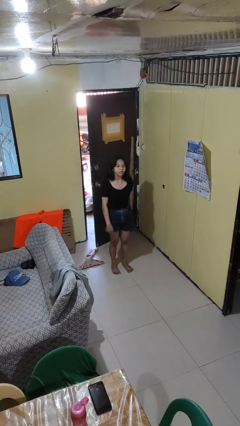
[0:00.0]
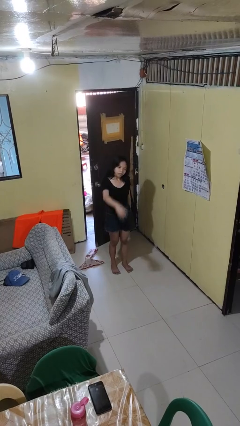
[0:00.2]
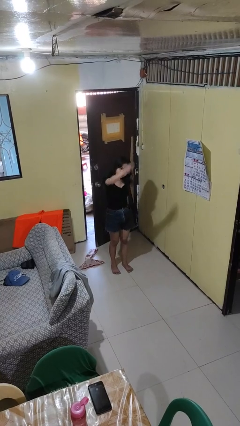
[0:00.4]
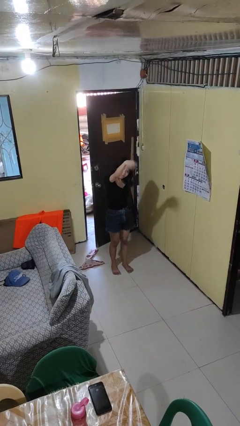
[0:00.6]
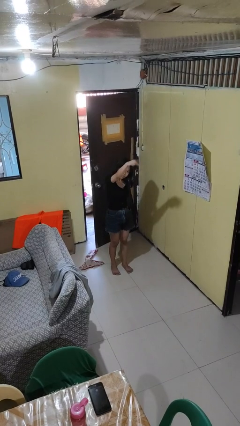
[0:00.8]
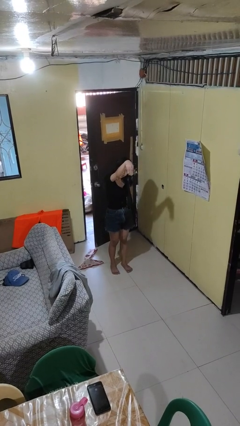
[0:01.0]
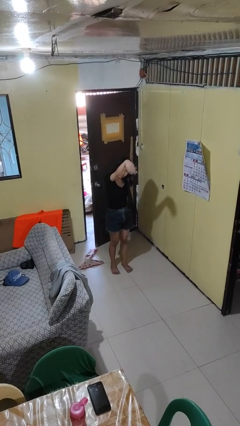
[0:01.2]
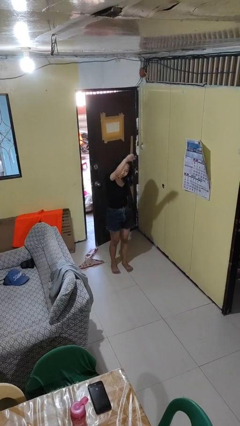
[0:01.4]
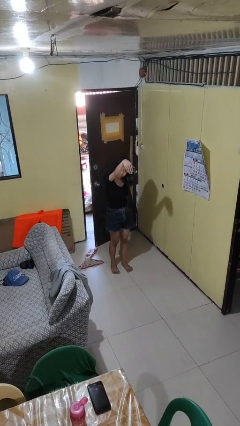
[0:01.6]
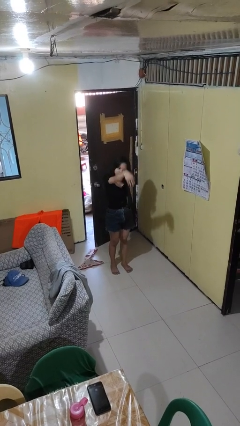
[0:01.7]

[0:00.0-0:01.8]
person gestures come here

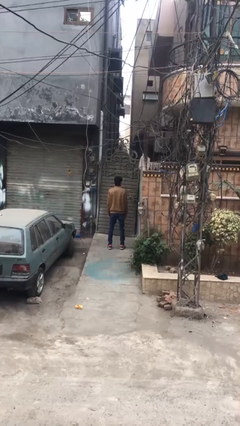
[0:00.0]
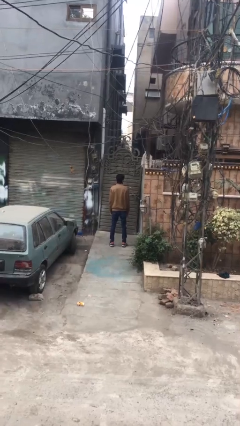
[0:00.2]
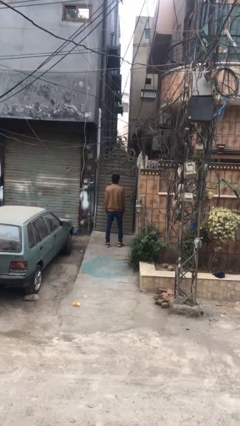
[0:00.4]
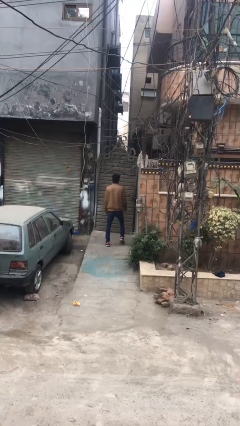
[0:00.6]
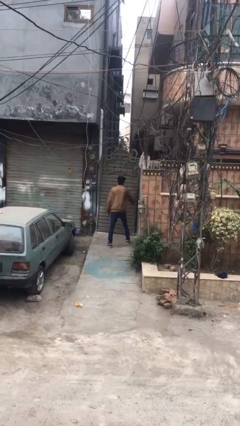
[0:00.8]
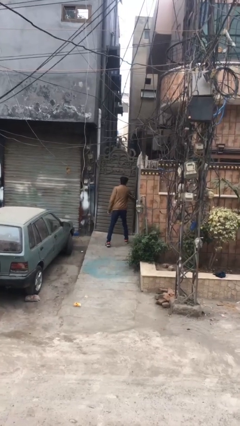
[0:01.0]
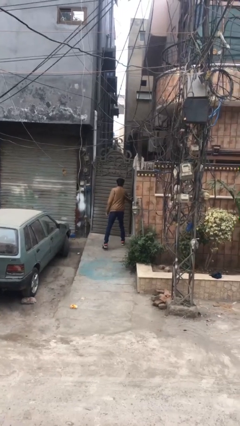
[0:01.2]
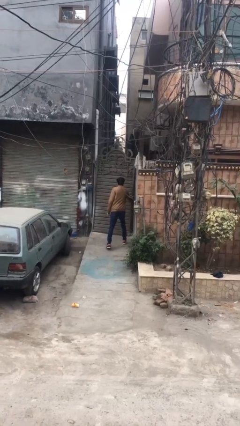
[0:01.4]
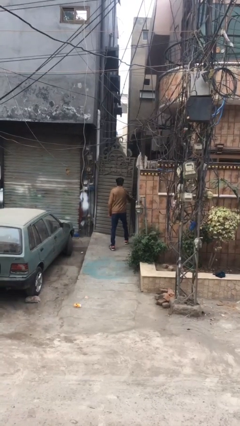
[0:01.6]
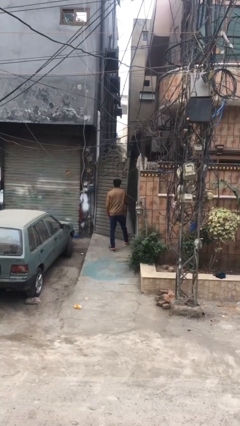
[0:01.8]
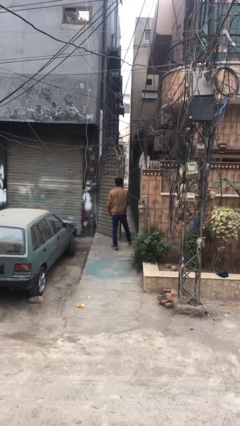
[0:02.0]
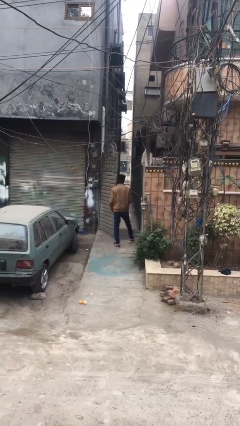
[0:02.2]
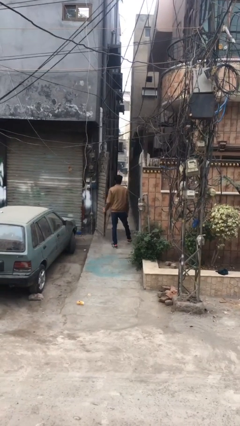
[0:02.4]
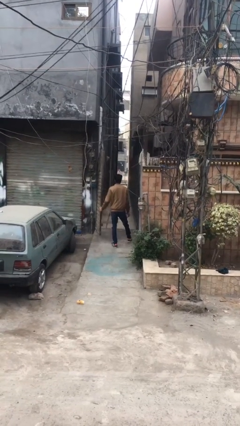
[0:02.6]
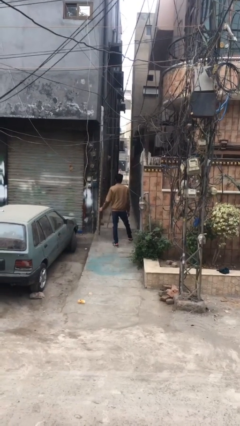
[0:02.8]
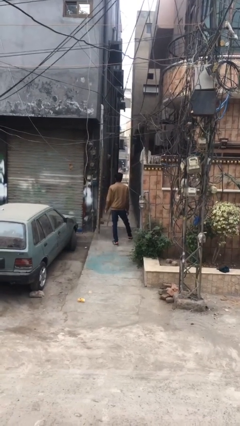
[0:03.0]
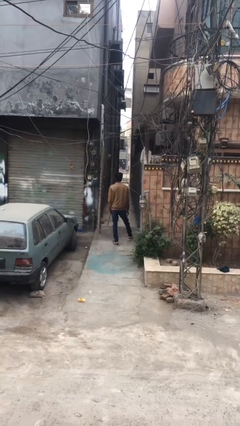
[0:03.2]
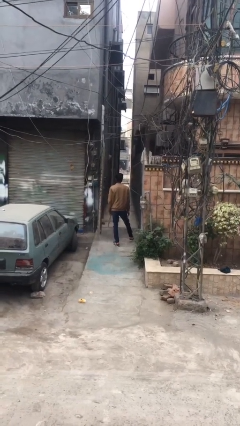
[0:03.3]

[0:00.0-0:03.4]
person opens facility door

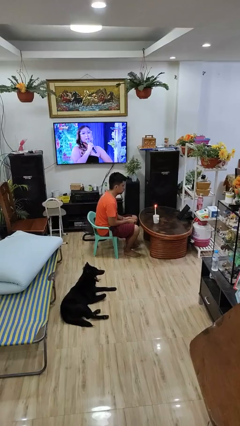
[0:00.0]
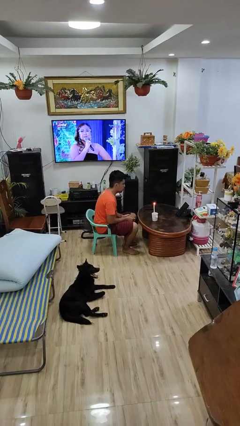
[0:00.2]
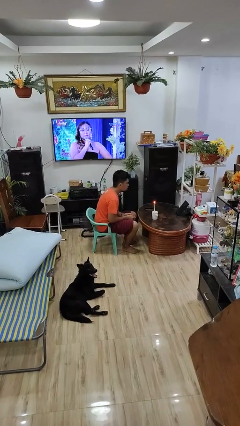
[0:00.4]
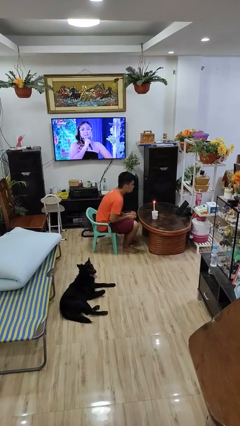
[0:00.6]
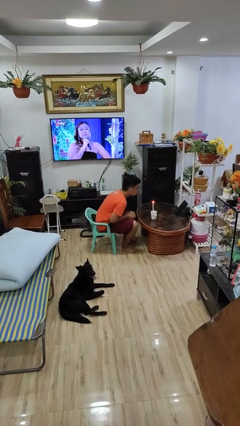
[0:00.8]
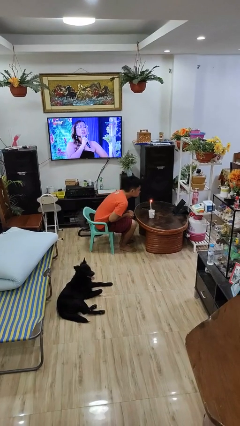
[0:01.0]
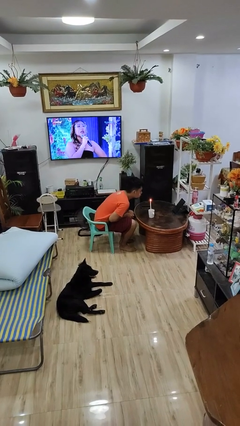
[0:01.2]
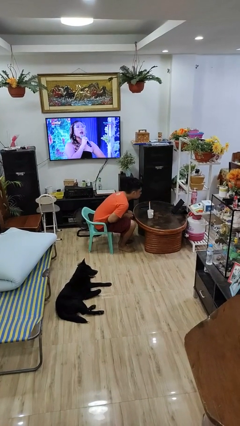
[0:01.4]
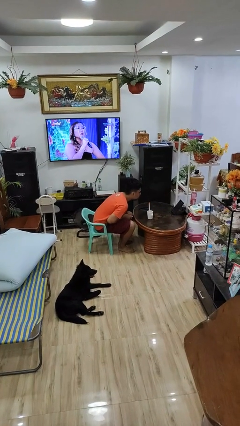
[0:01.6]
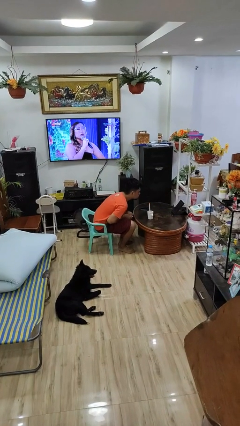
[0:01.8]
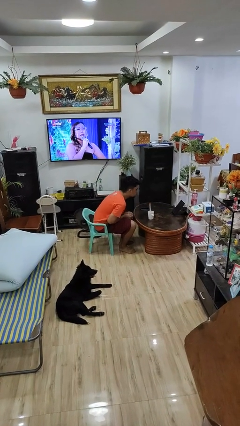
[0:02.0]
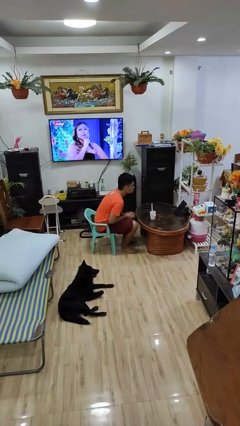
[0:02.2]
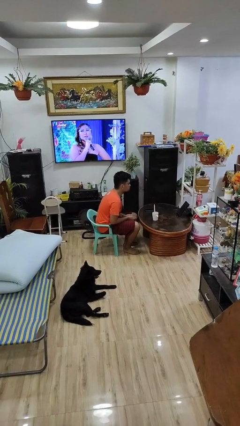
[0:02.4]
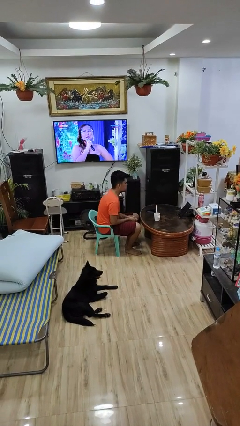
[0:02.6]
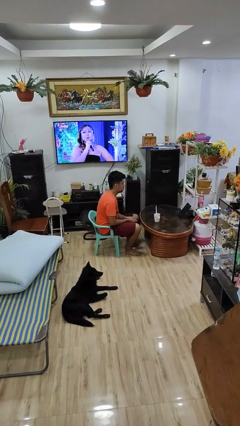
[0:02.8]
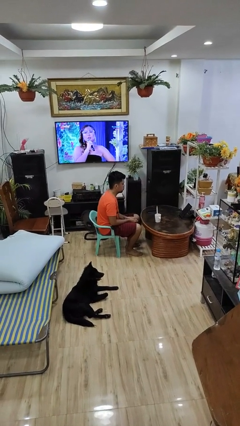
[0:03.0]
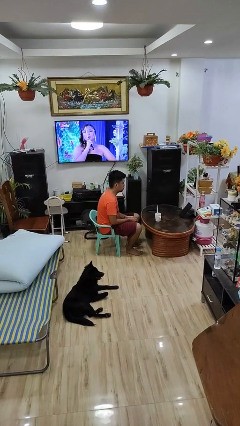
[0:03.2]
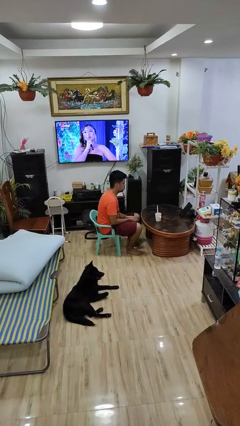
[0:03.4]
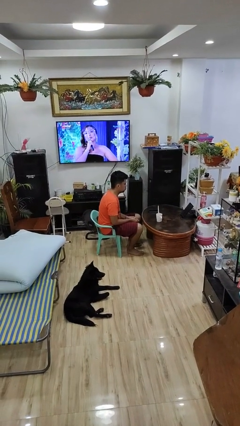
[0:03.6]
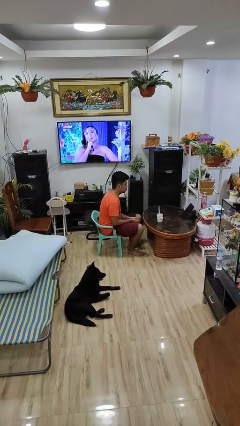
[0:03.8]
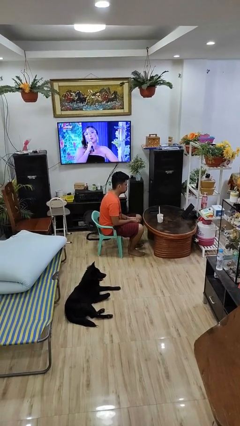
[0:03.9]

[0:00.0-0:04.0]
person extinguishes candle

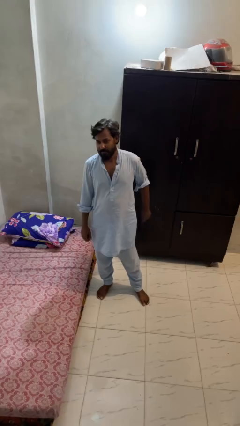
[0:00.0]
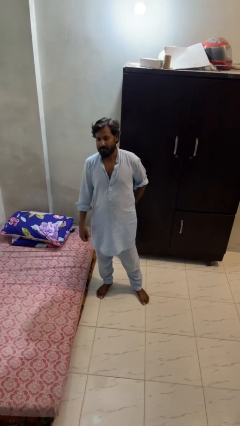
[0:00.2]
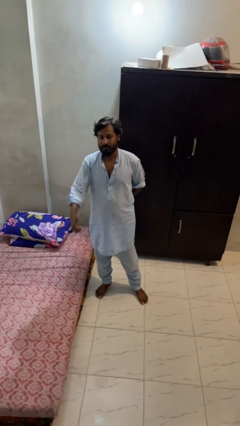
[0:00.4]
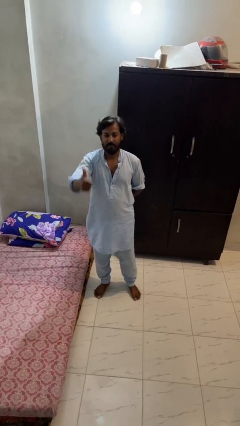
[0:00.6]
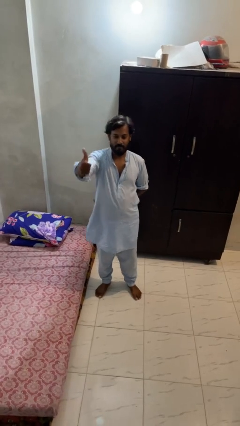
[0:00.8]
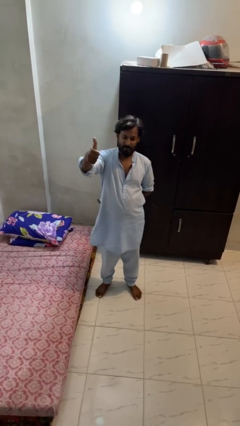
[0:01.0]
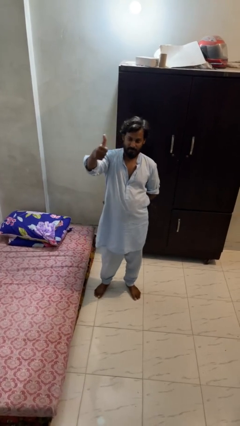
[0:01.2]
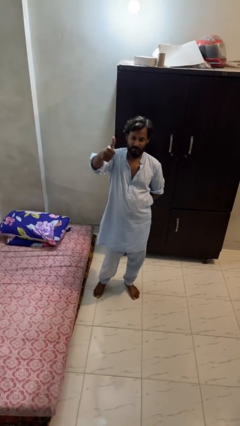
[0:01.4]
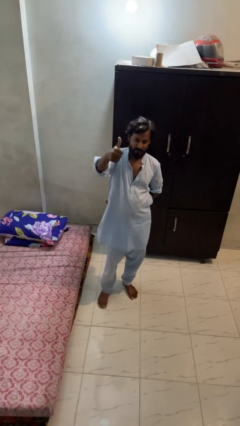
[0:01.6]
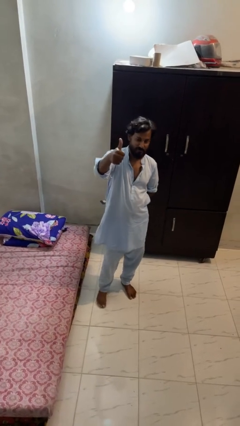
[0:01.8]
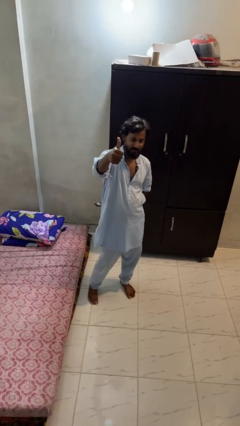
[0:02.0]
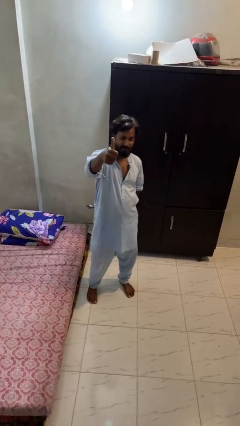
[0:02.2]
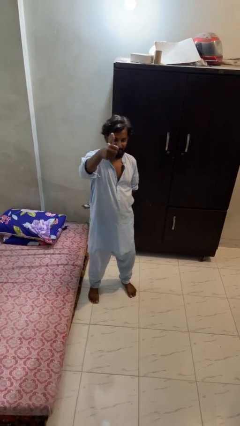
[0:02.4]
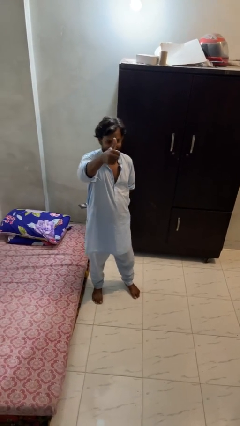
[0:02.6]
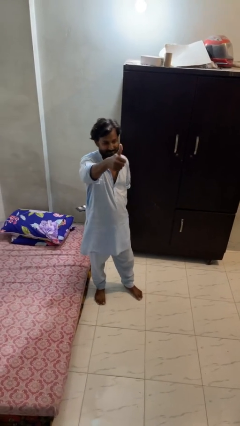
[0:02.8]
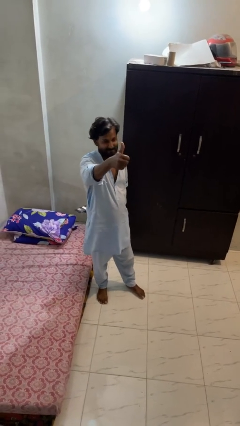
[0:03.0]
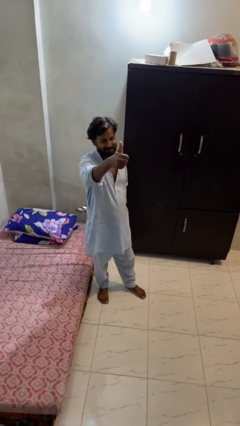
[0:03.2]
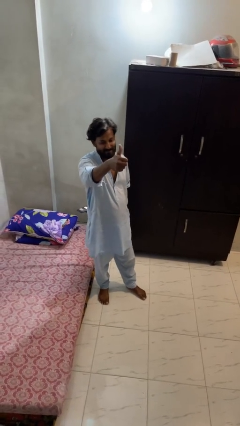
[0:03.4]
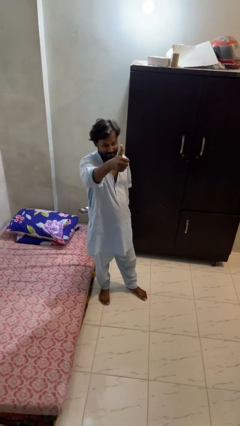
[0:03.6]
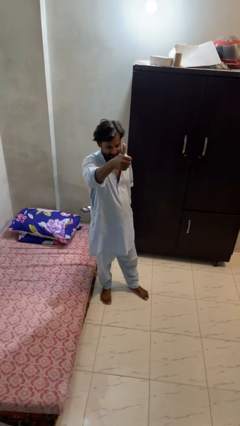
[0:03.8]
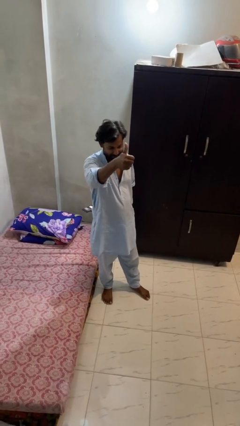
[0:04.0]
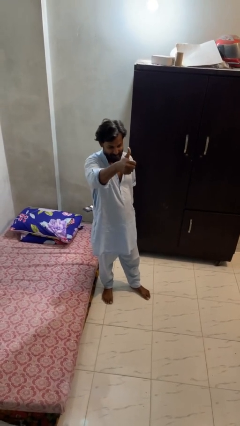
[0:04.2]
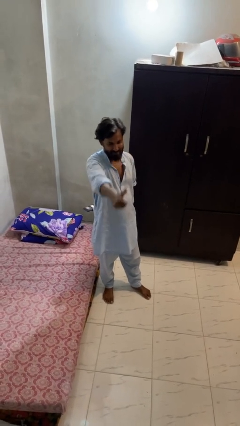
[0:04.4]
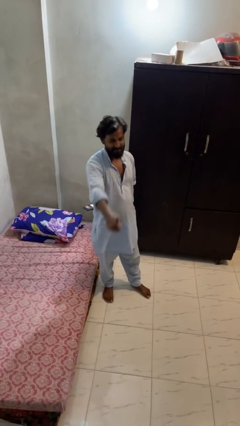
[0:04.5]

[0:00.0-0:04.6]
person gestures thumbs up

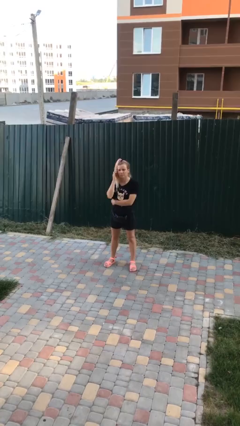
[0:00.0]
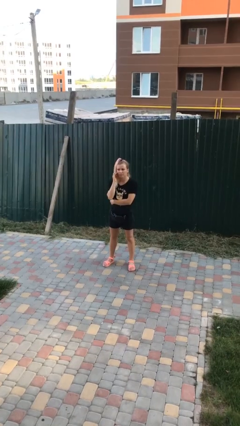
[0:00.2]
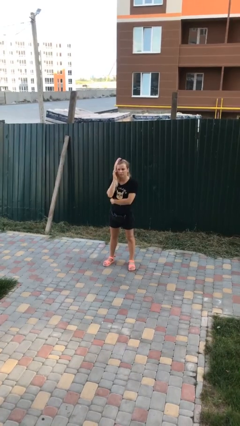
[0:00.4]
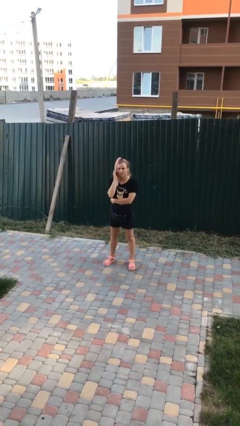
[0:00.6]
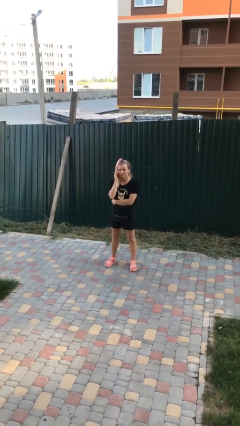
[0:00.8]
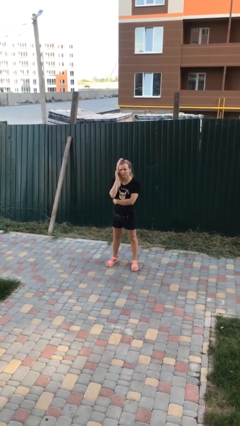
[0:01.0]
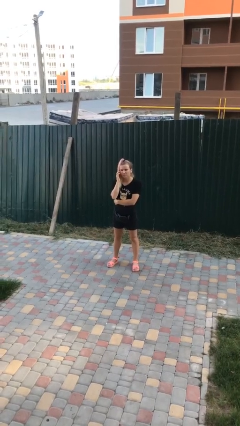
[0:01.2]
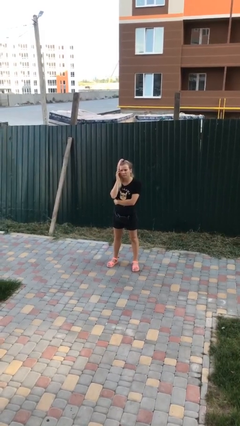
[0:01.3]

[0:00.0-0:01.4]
person scratches face

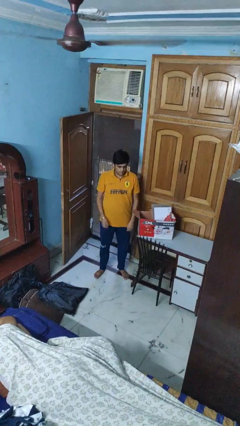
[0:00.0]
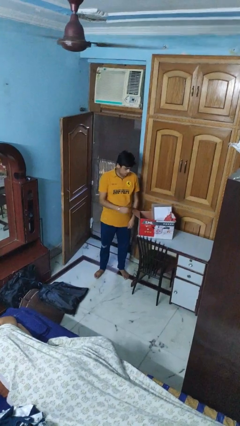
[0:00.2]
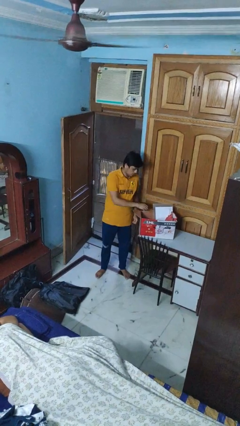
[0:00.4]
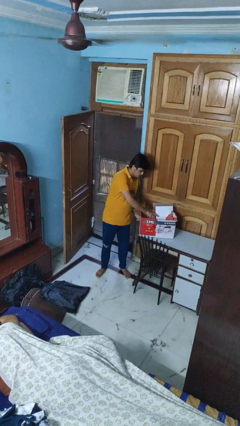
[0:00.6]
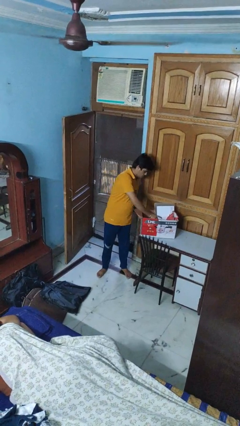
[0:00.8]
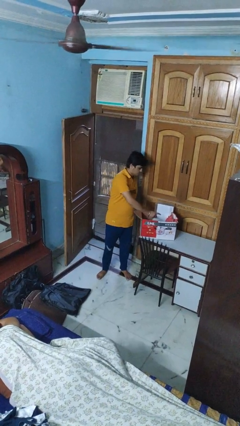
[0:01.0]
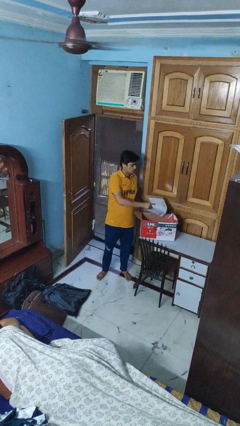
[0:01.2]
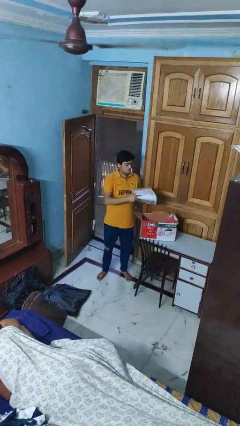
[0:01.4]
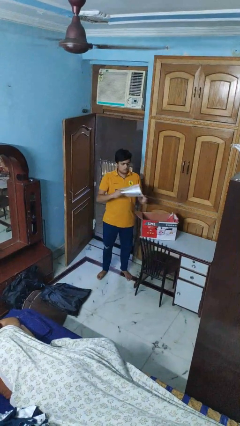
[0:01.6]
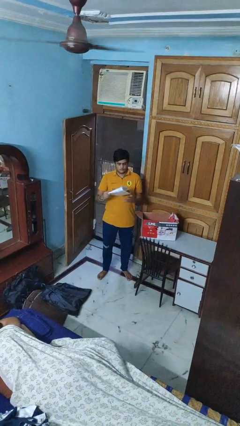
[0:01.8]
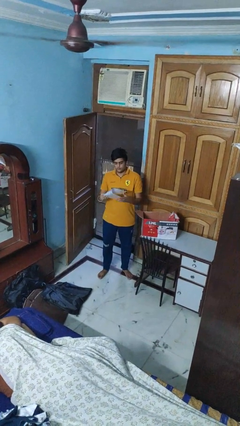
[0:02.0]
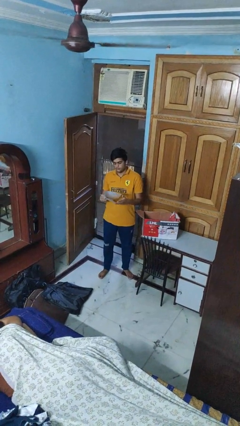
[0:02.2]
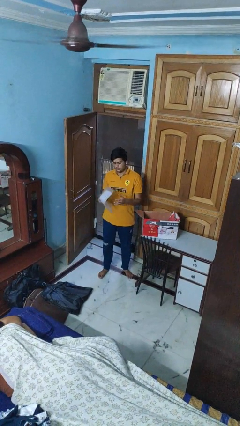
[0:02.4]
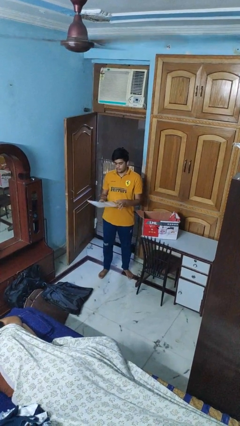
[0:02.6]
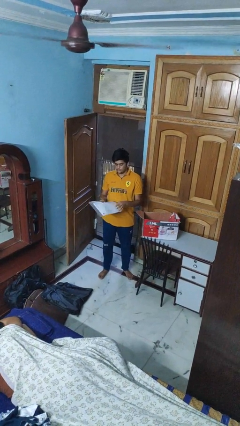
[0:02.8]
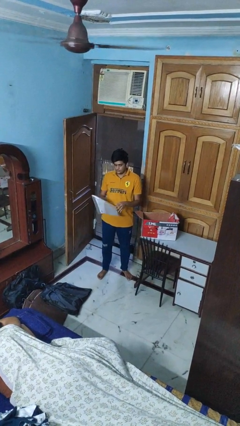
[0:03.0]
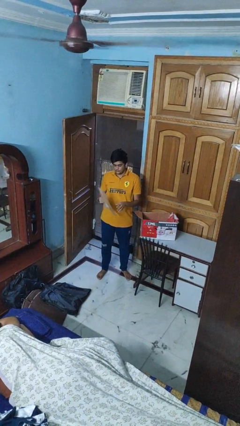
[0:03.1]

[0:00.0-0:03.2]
person takes object from box
